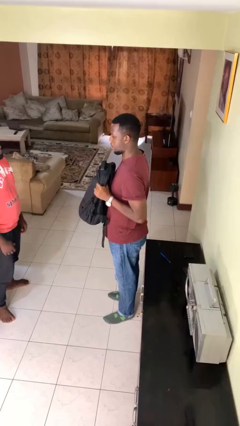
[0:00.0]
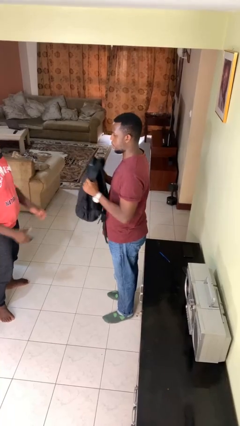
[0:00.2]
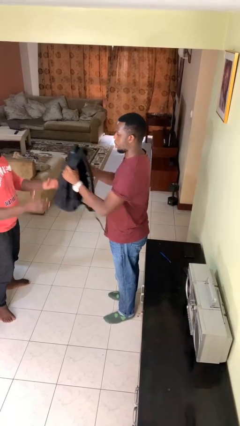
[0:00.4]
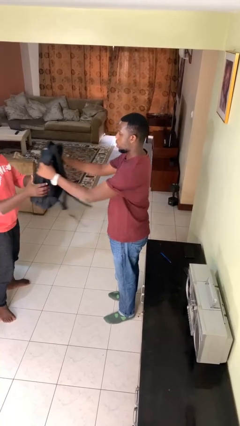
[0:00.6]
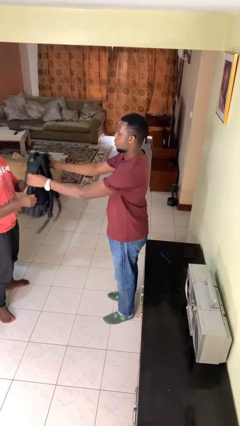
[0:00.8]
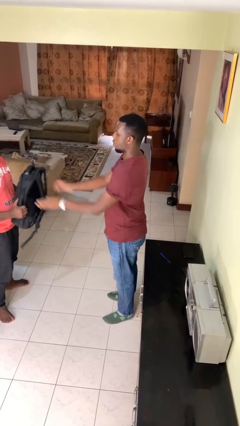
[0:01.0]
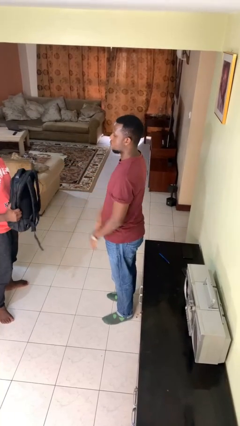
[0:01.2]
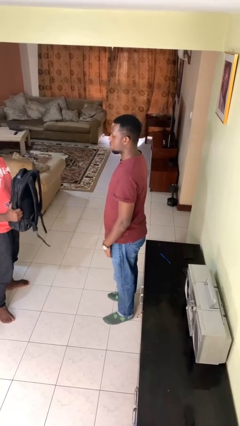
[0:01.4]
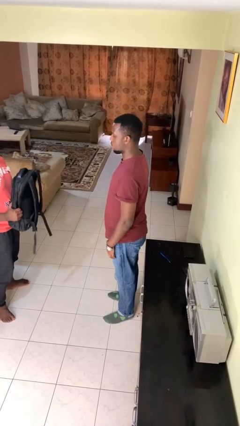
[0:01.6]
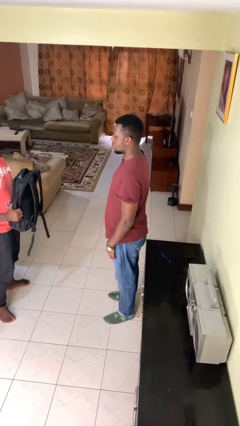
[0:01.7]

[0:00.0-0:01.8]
person transfers object to person

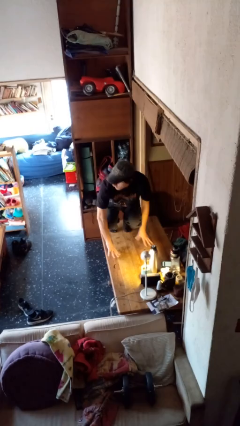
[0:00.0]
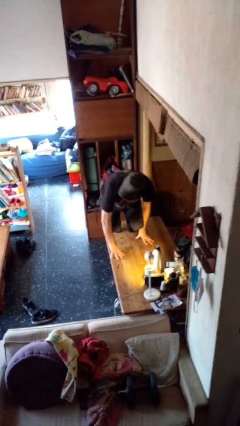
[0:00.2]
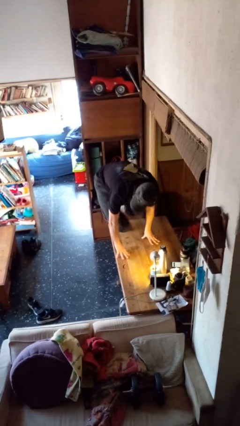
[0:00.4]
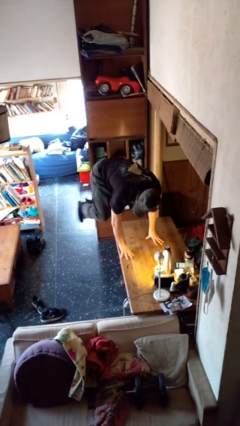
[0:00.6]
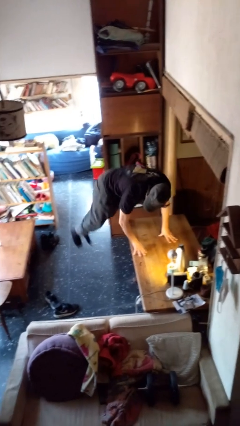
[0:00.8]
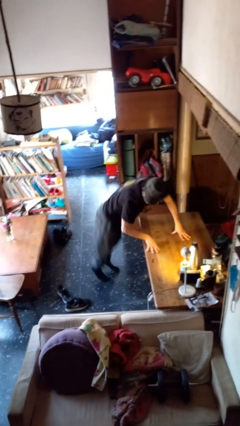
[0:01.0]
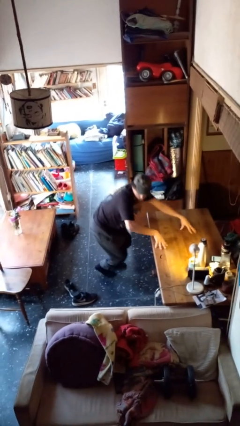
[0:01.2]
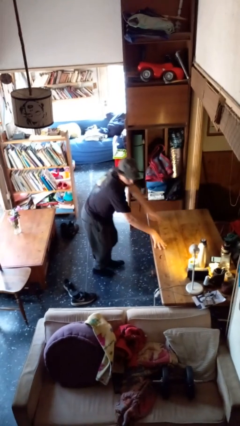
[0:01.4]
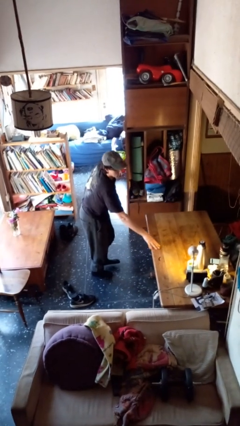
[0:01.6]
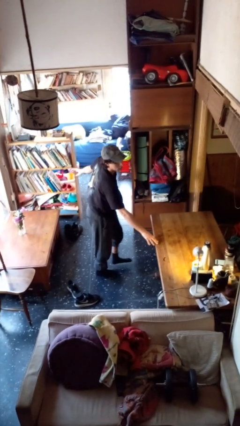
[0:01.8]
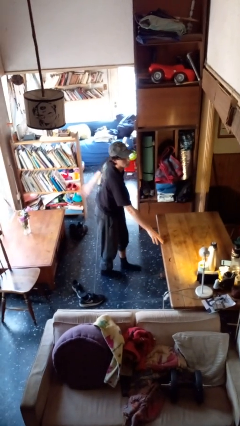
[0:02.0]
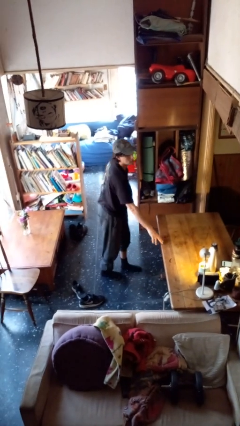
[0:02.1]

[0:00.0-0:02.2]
person climbs off table

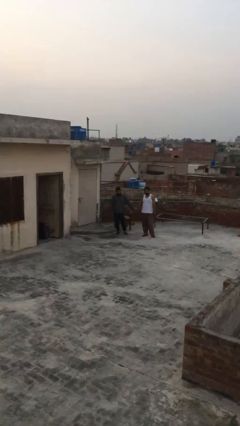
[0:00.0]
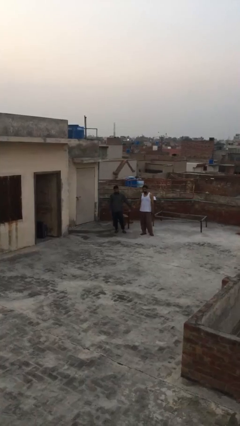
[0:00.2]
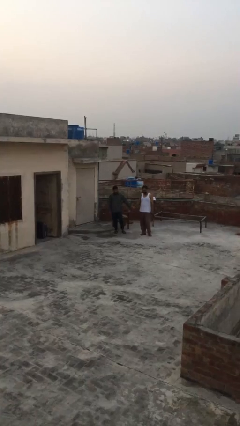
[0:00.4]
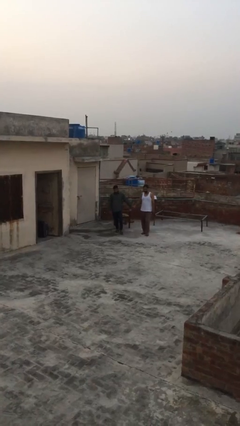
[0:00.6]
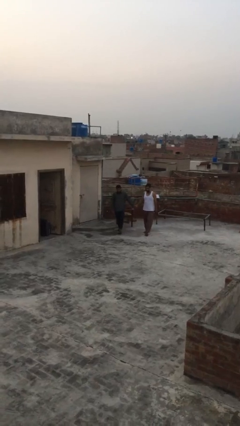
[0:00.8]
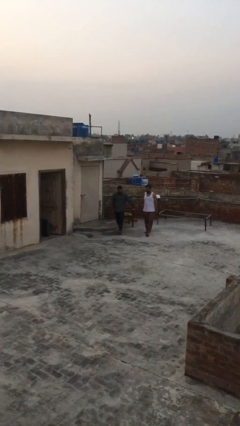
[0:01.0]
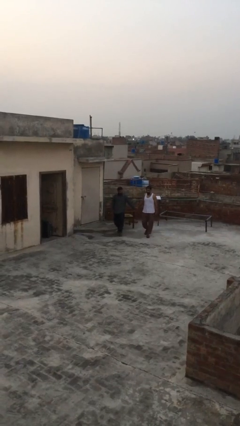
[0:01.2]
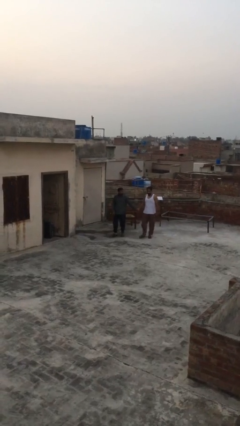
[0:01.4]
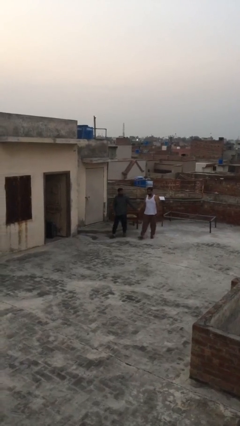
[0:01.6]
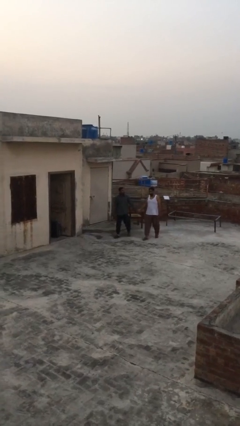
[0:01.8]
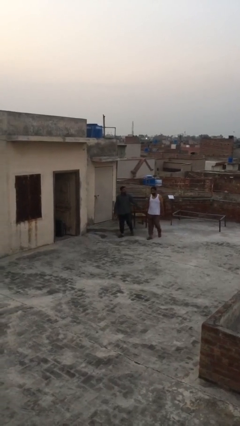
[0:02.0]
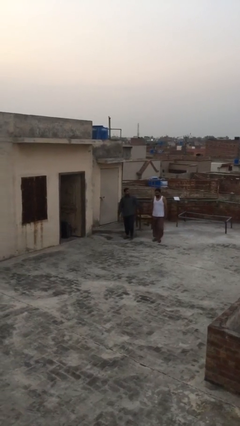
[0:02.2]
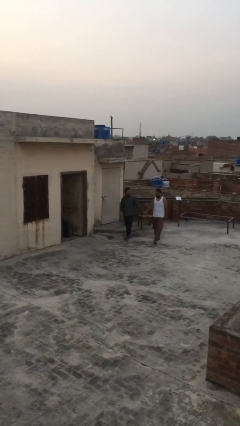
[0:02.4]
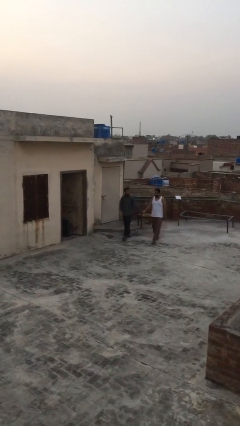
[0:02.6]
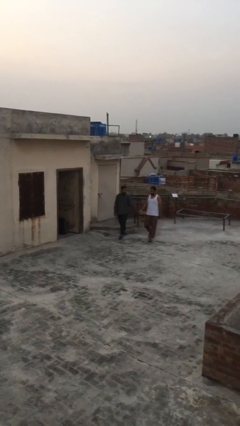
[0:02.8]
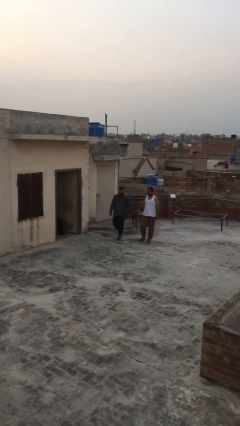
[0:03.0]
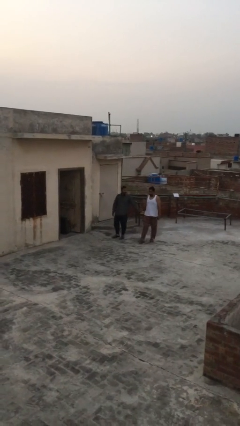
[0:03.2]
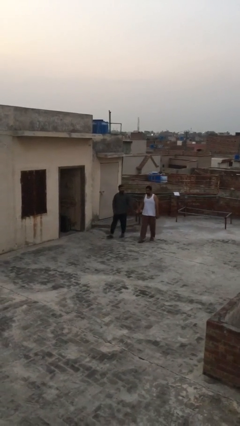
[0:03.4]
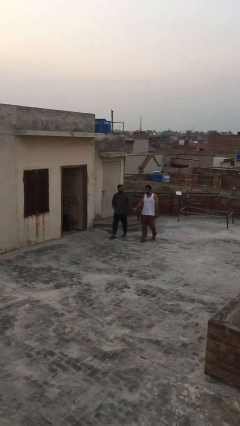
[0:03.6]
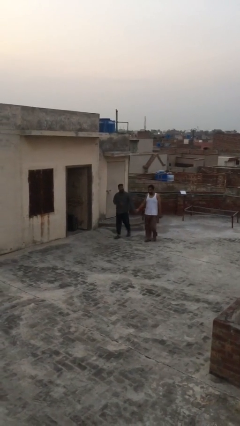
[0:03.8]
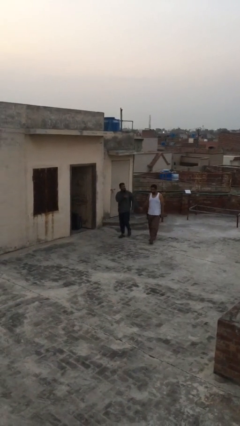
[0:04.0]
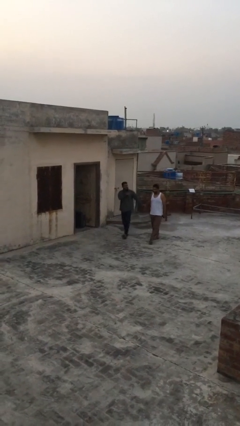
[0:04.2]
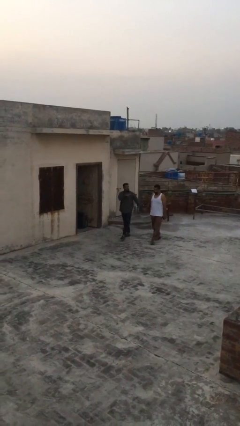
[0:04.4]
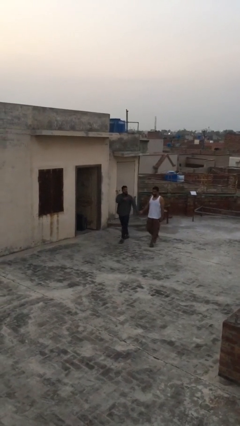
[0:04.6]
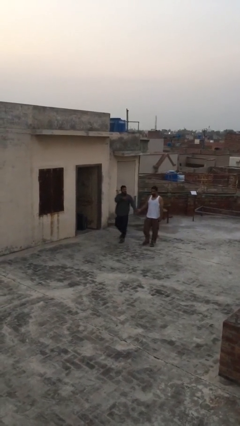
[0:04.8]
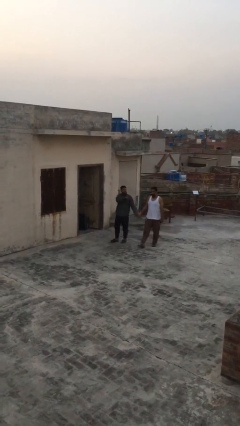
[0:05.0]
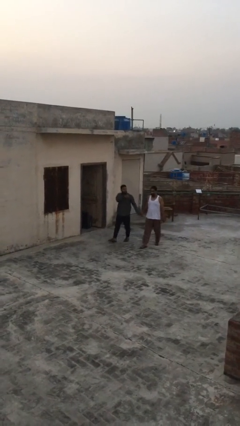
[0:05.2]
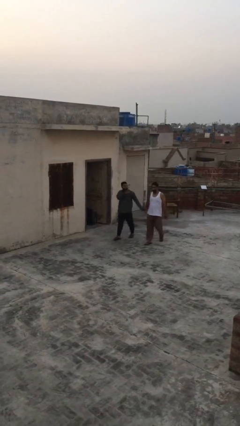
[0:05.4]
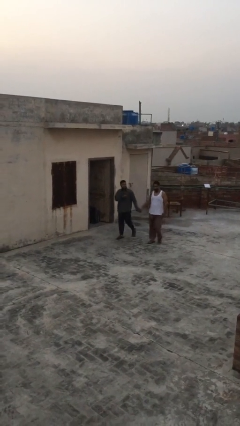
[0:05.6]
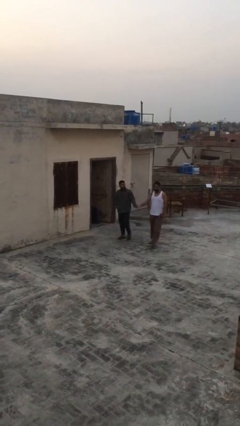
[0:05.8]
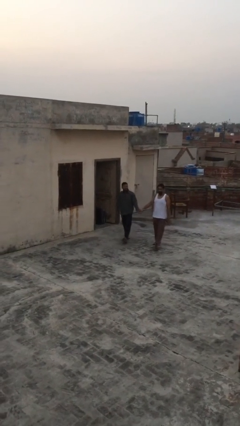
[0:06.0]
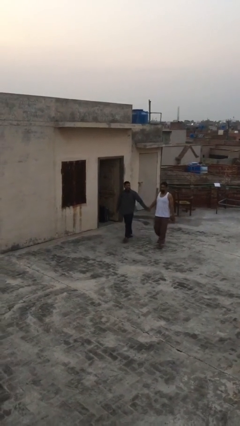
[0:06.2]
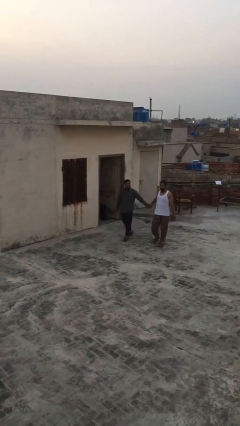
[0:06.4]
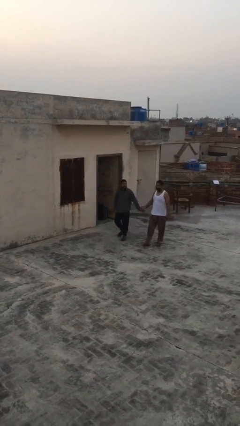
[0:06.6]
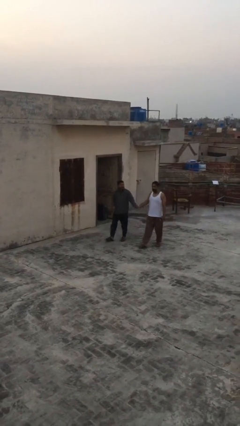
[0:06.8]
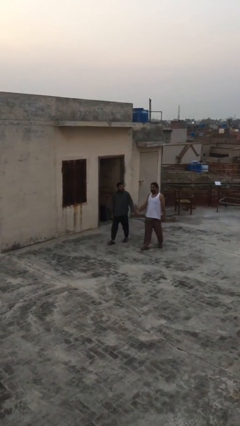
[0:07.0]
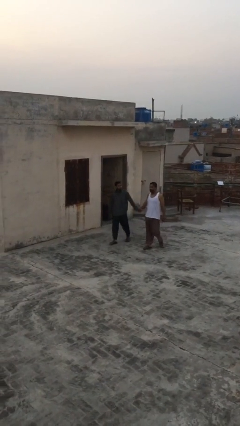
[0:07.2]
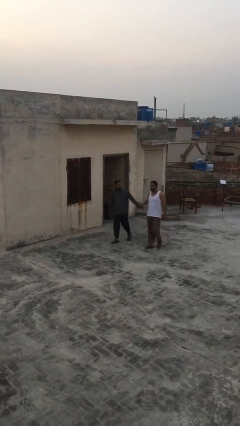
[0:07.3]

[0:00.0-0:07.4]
person holds hand

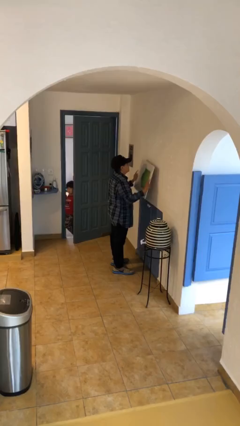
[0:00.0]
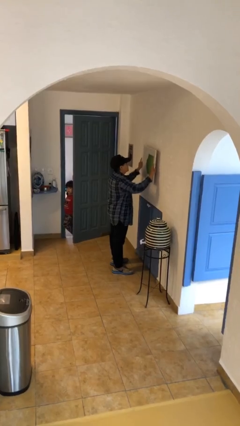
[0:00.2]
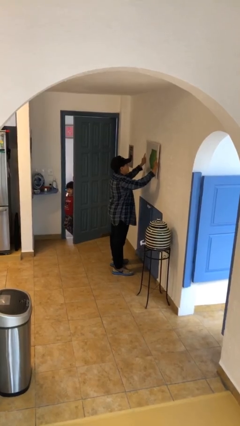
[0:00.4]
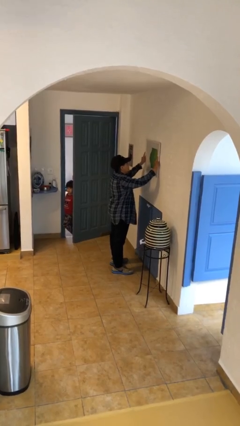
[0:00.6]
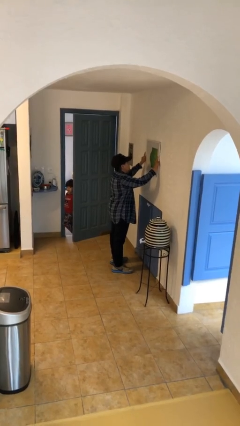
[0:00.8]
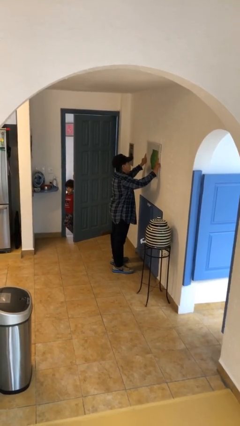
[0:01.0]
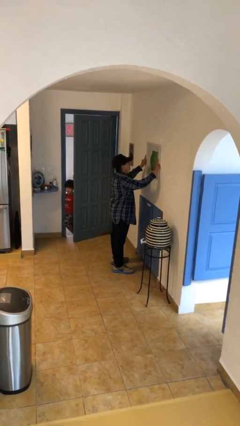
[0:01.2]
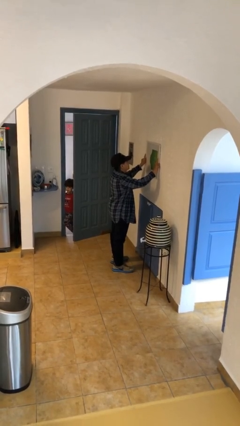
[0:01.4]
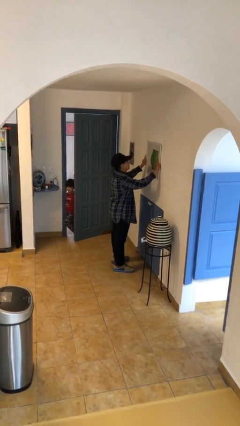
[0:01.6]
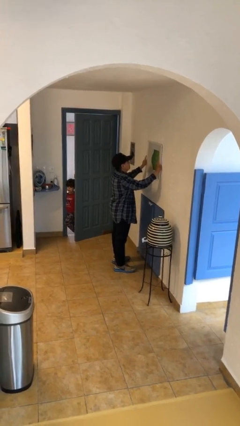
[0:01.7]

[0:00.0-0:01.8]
person puts up picture frame

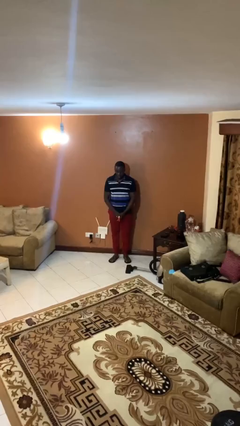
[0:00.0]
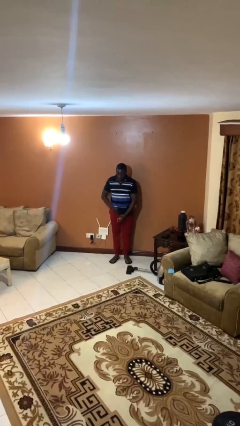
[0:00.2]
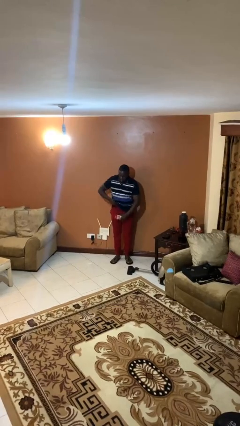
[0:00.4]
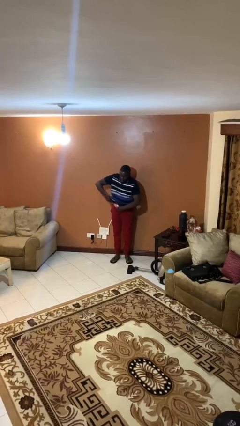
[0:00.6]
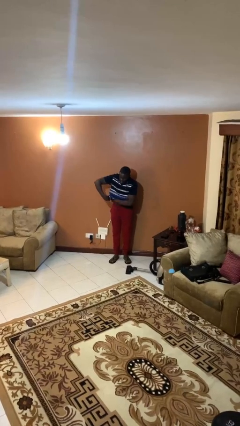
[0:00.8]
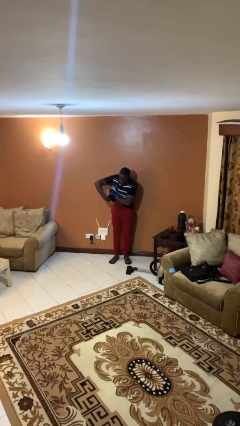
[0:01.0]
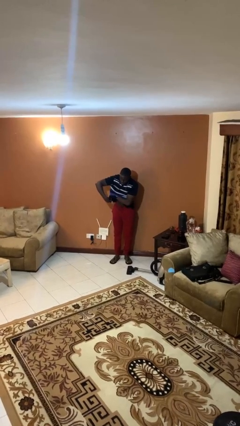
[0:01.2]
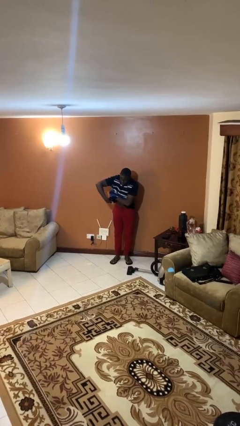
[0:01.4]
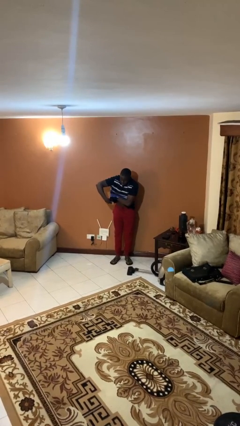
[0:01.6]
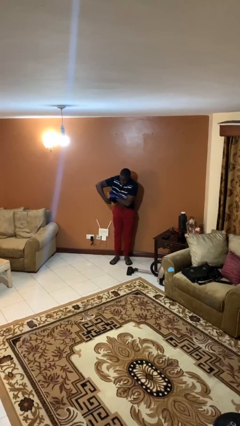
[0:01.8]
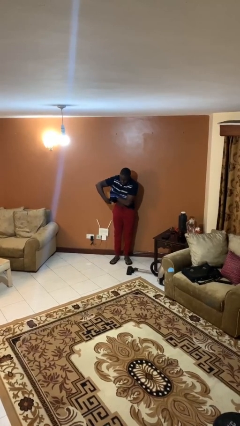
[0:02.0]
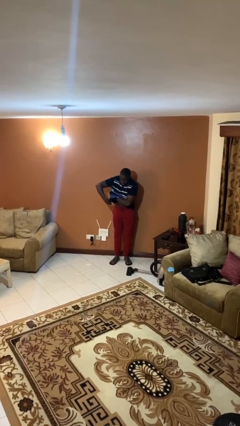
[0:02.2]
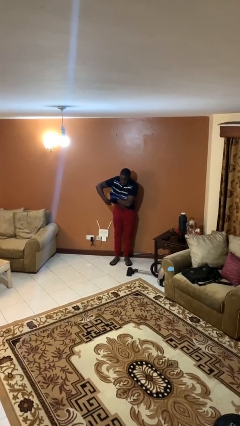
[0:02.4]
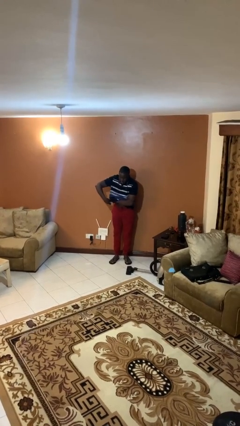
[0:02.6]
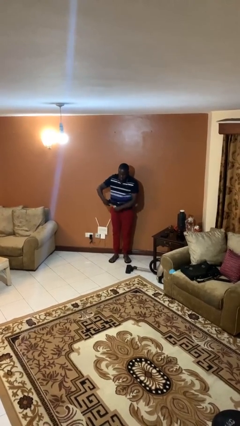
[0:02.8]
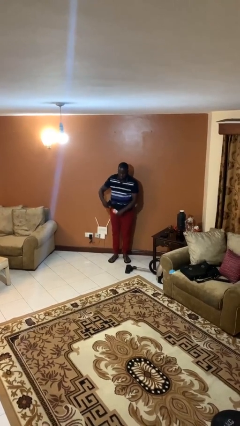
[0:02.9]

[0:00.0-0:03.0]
person applies deodorant

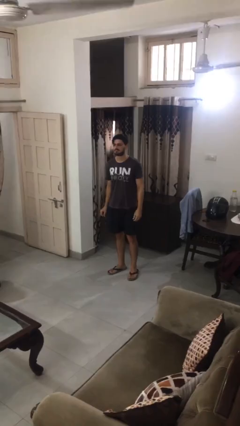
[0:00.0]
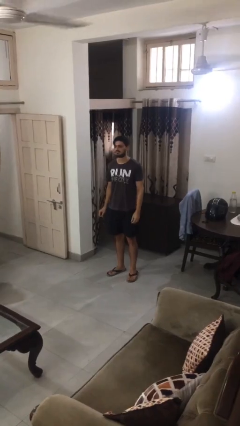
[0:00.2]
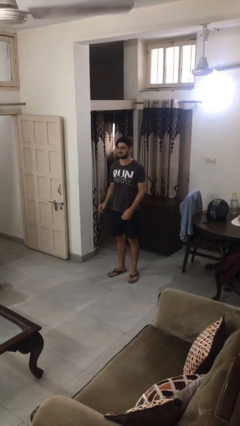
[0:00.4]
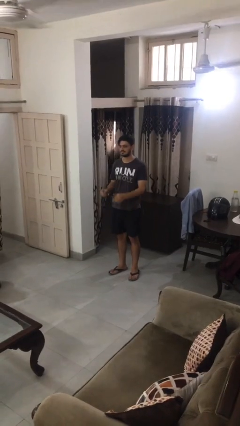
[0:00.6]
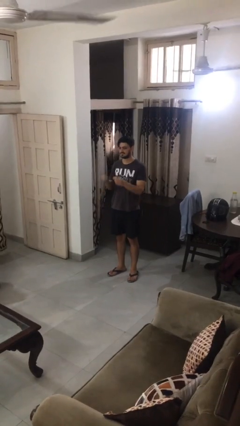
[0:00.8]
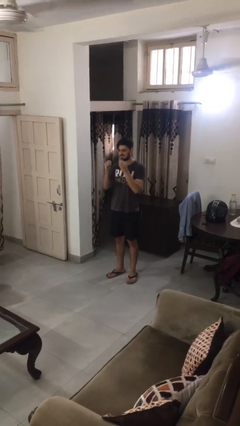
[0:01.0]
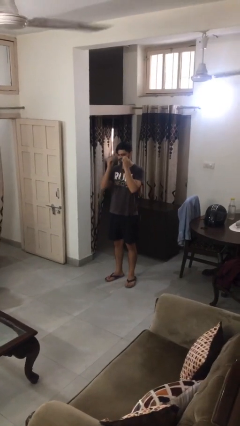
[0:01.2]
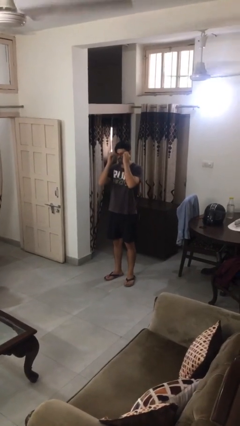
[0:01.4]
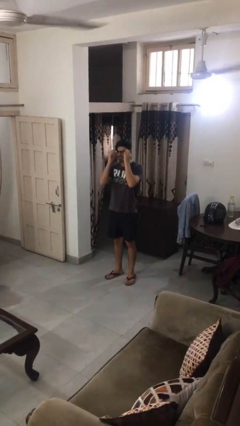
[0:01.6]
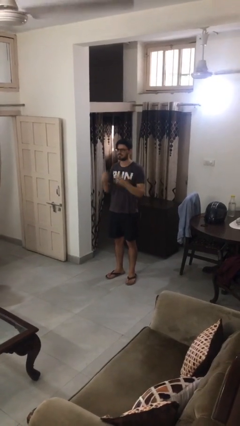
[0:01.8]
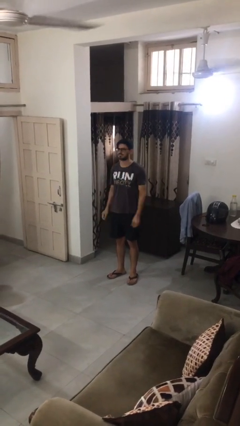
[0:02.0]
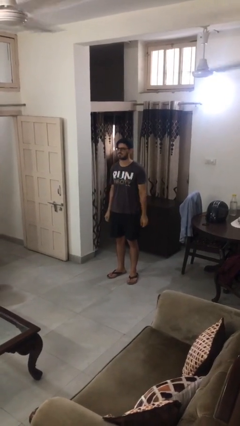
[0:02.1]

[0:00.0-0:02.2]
person puts on glasses
